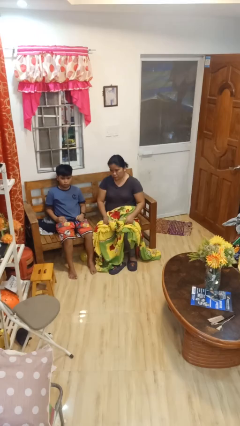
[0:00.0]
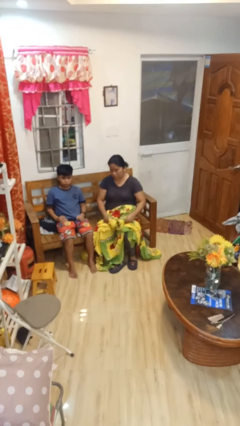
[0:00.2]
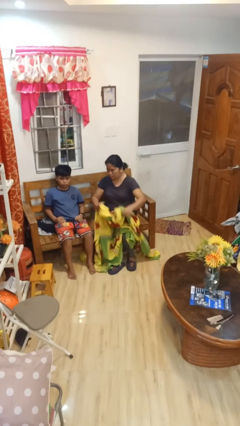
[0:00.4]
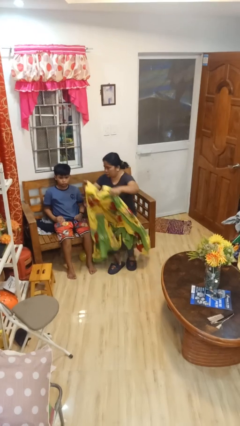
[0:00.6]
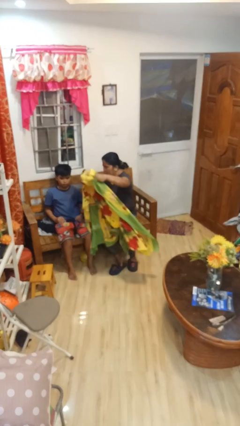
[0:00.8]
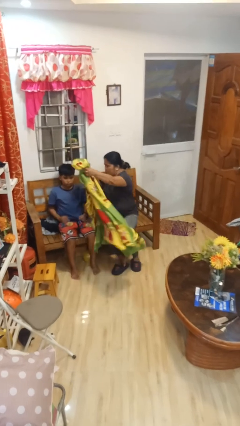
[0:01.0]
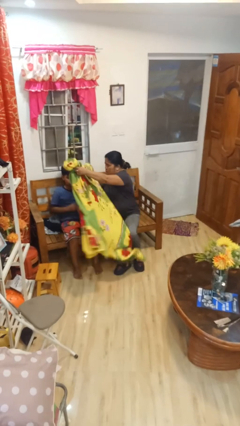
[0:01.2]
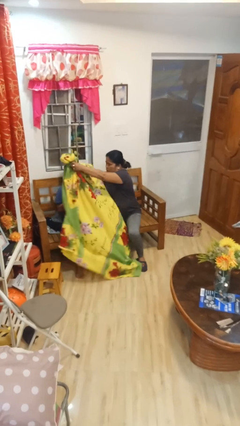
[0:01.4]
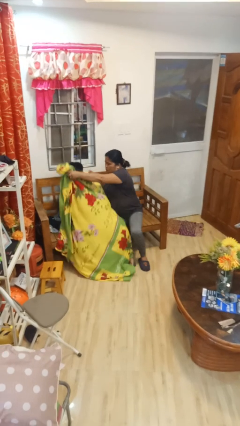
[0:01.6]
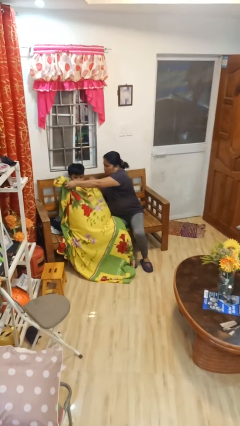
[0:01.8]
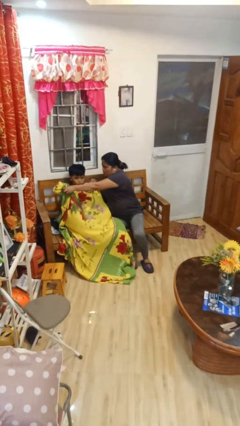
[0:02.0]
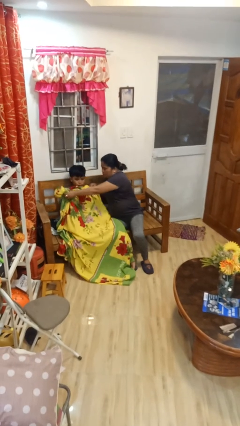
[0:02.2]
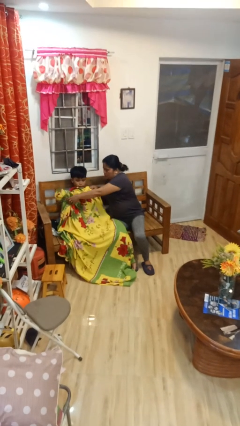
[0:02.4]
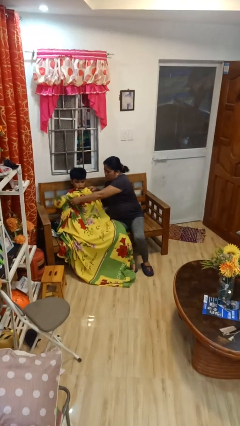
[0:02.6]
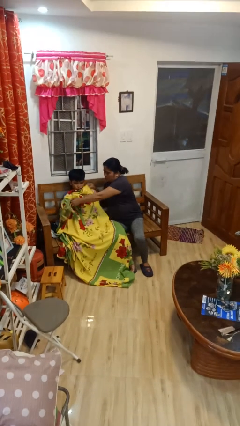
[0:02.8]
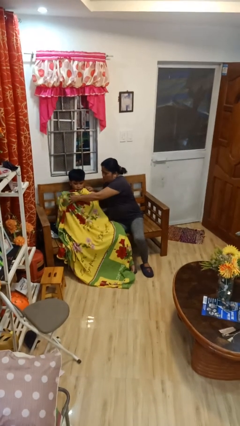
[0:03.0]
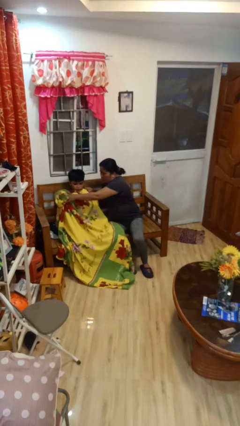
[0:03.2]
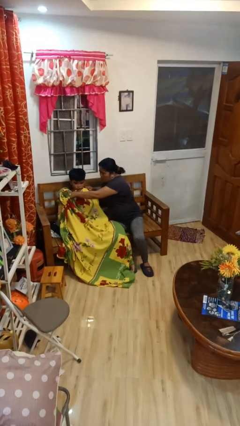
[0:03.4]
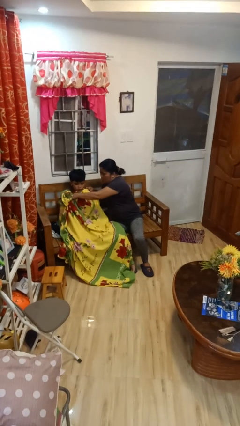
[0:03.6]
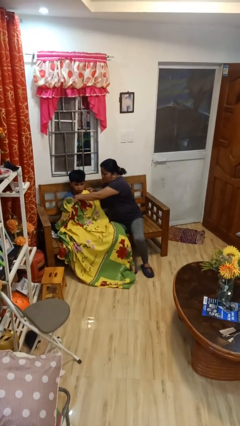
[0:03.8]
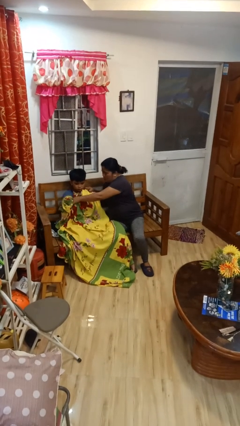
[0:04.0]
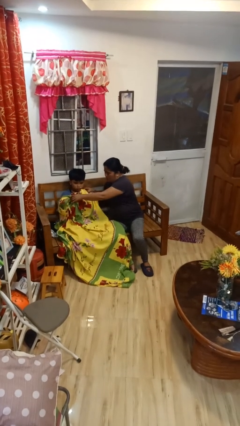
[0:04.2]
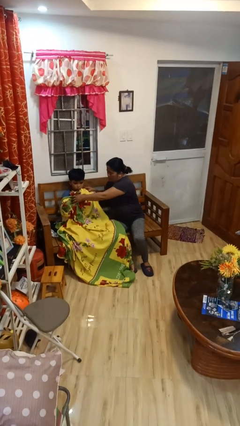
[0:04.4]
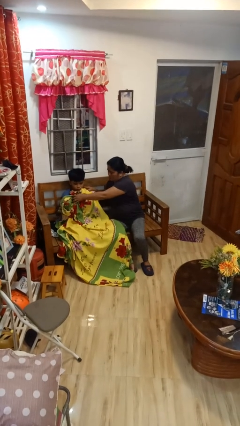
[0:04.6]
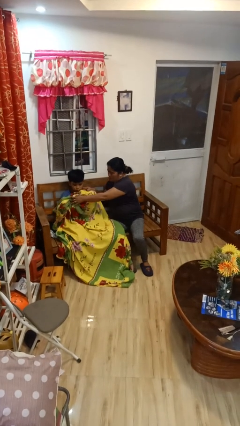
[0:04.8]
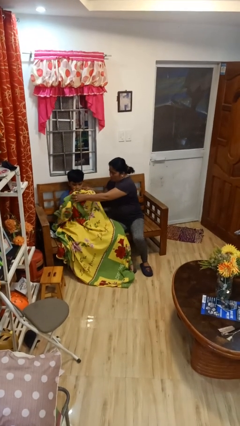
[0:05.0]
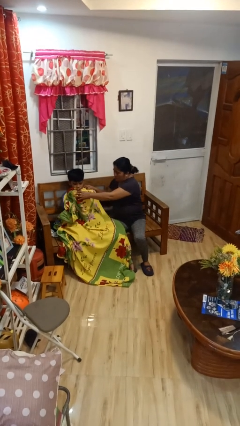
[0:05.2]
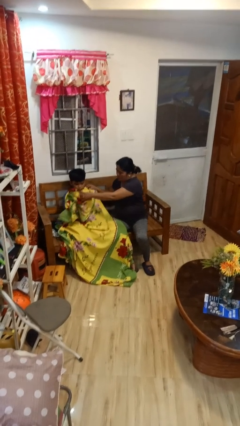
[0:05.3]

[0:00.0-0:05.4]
person covers friend with blanket

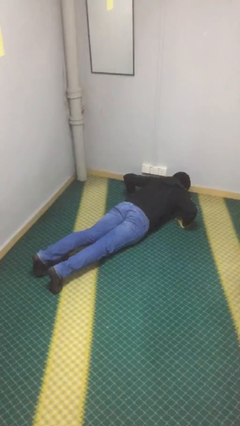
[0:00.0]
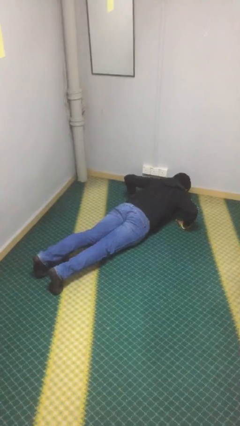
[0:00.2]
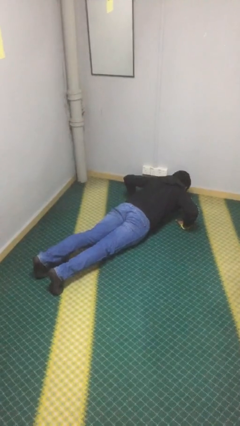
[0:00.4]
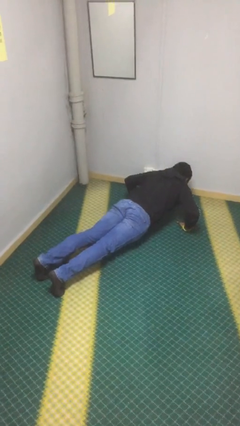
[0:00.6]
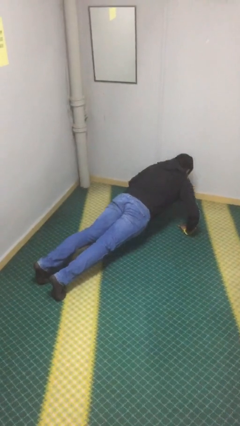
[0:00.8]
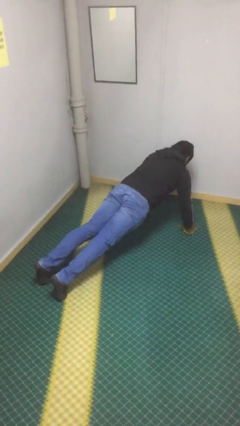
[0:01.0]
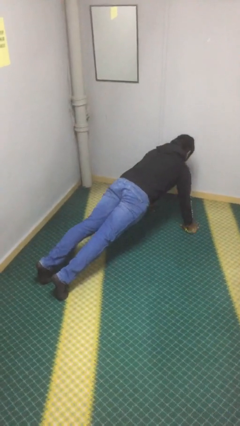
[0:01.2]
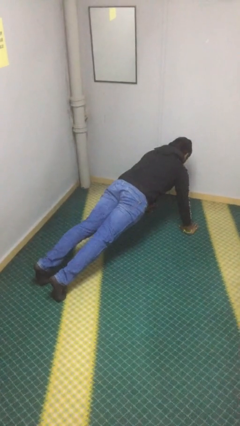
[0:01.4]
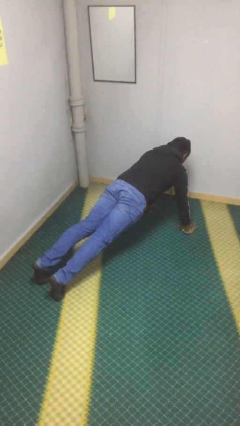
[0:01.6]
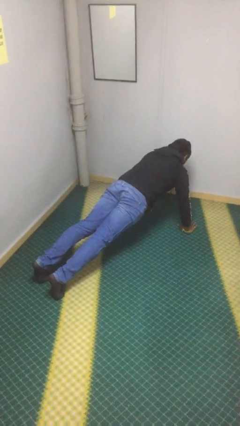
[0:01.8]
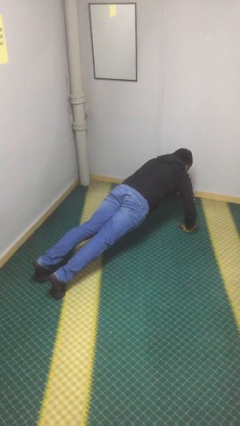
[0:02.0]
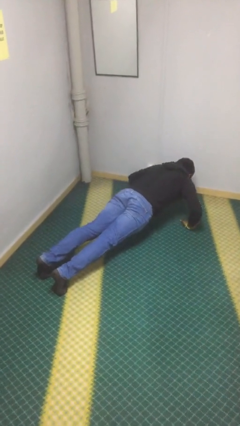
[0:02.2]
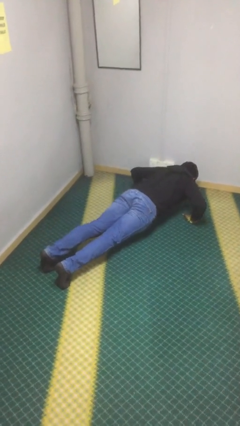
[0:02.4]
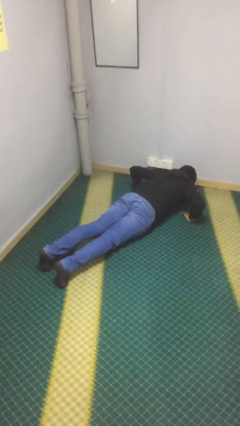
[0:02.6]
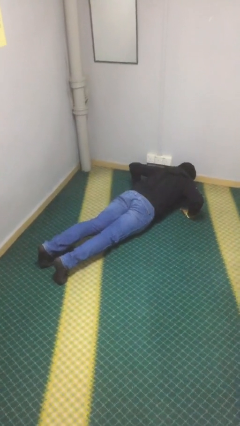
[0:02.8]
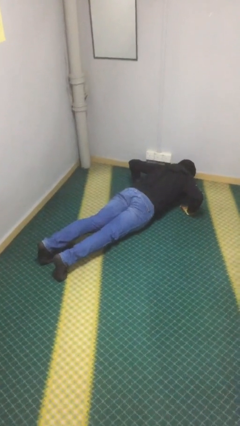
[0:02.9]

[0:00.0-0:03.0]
person exercises with pushup

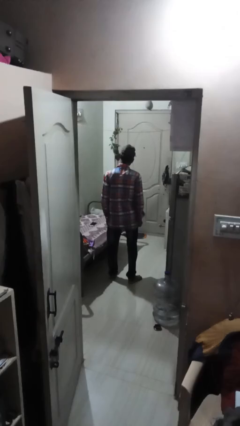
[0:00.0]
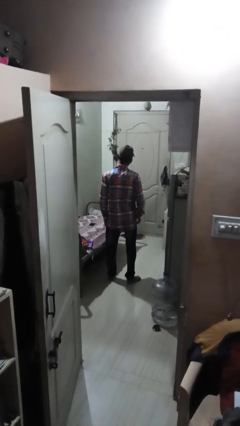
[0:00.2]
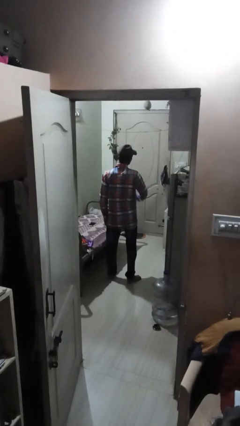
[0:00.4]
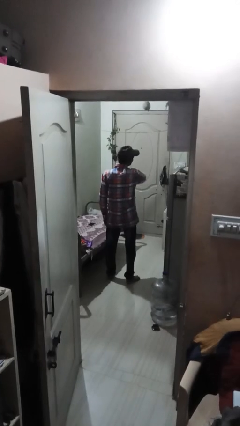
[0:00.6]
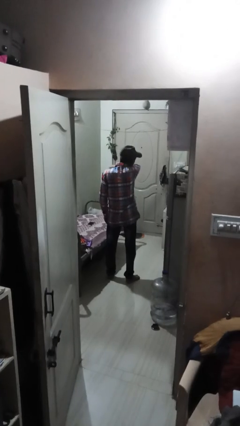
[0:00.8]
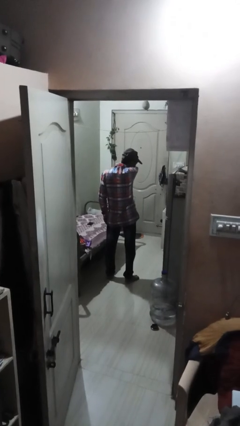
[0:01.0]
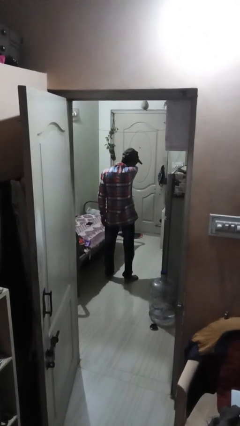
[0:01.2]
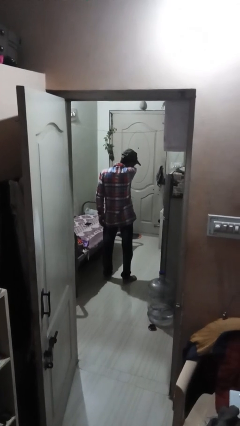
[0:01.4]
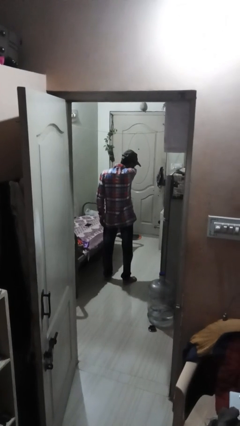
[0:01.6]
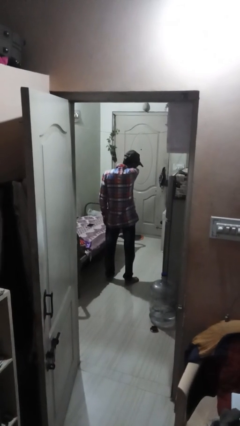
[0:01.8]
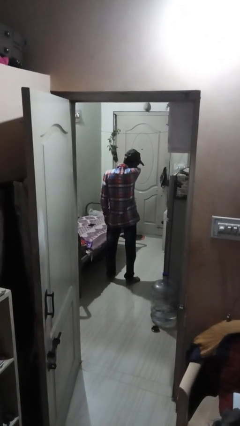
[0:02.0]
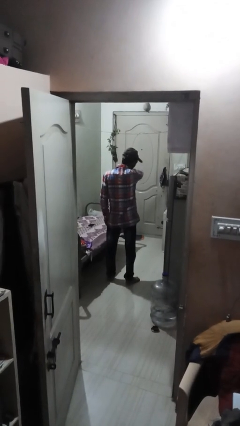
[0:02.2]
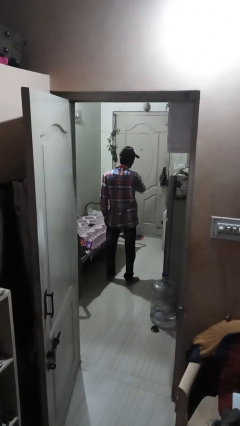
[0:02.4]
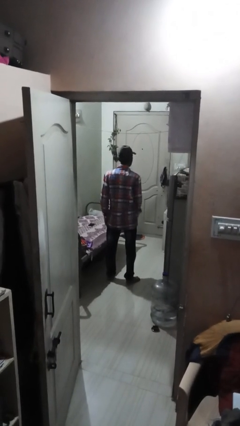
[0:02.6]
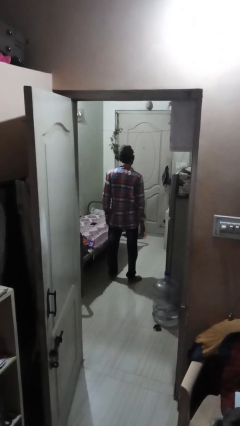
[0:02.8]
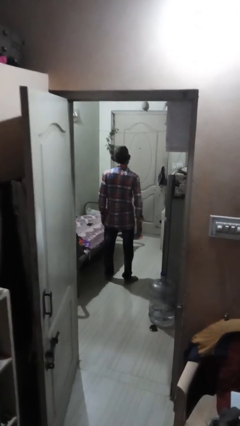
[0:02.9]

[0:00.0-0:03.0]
person sneezes into arm

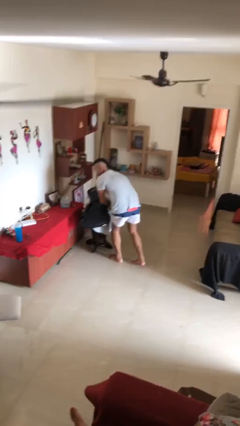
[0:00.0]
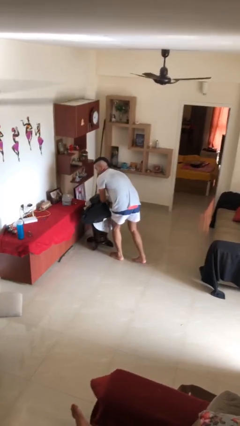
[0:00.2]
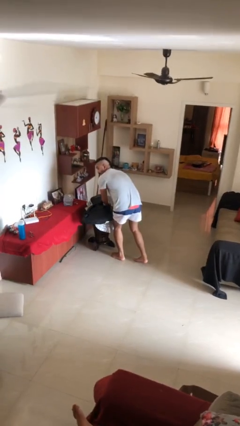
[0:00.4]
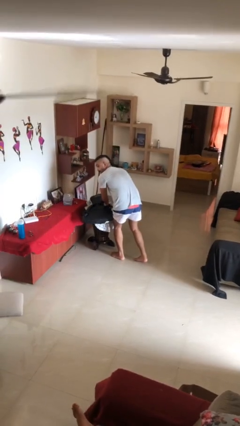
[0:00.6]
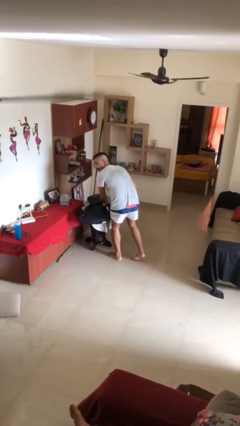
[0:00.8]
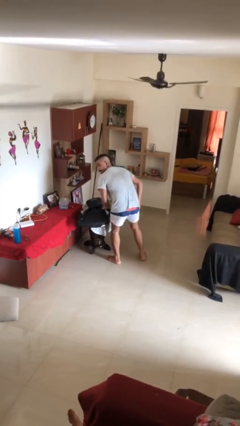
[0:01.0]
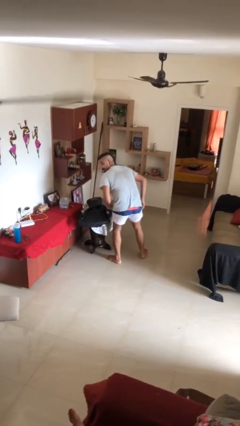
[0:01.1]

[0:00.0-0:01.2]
person puts down object on table

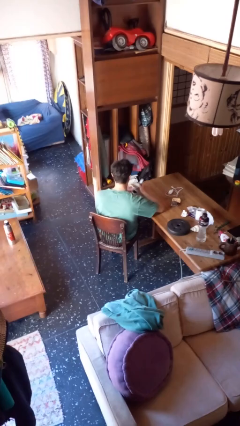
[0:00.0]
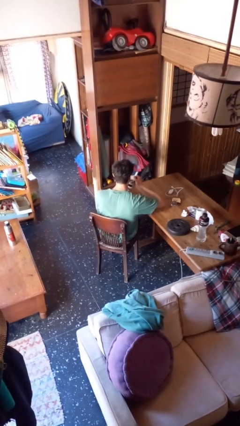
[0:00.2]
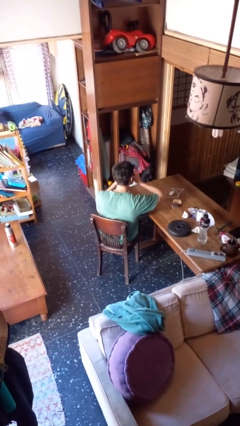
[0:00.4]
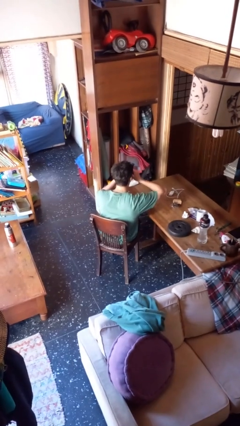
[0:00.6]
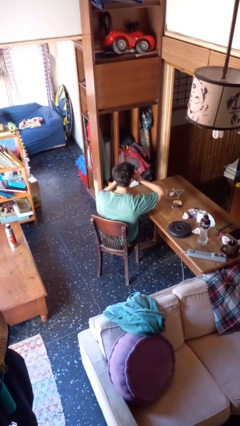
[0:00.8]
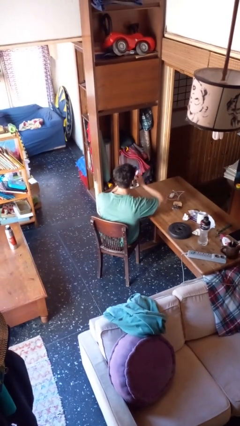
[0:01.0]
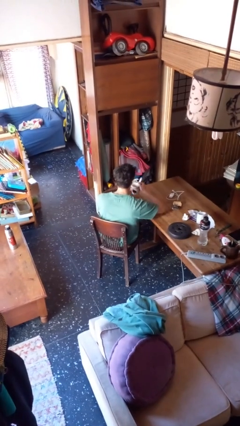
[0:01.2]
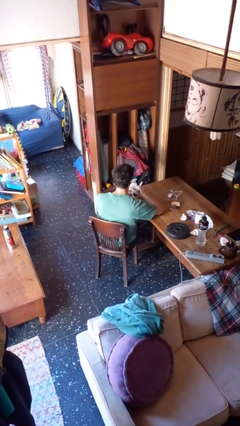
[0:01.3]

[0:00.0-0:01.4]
person drinks from mug

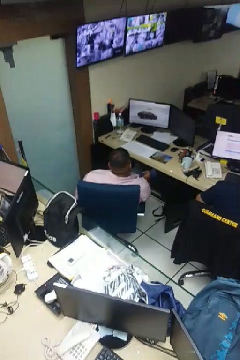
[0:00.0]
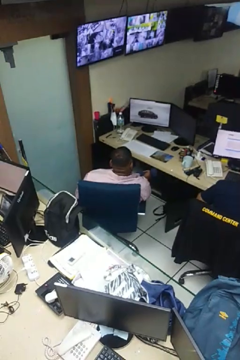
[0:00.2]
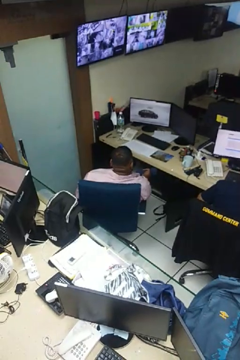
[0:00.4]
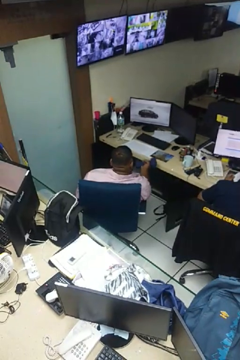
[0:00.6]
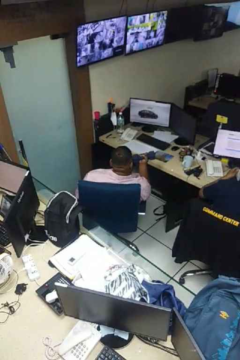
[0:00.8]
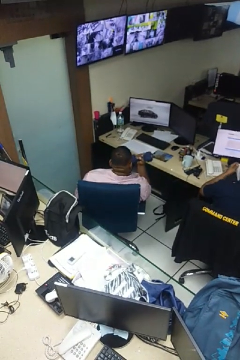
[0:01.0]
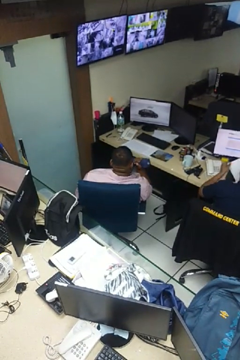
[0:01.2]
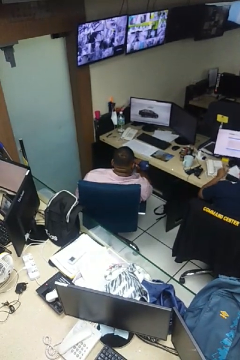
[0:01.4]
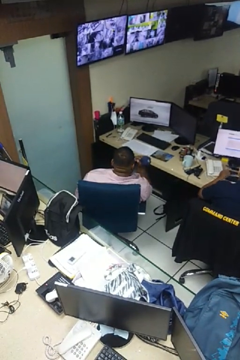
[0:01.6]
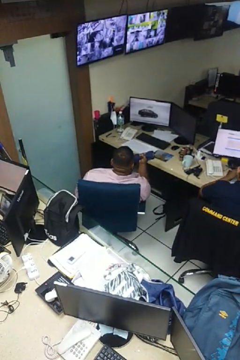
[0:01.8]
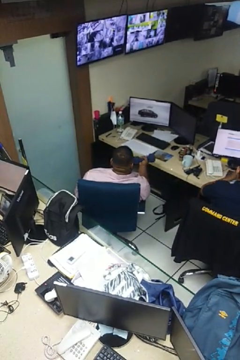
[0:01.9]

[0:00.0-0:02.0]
person lifts dumbbells

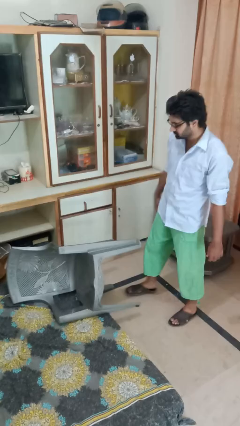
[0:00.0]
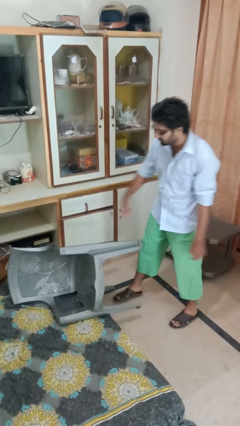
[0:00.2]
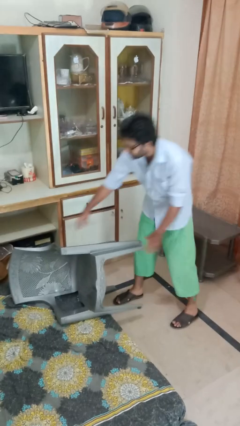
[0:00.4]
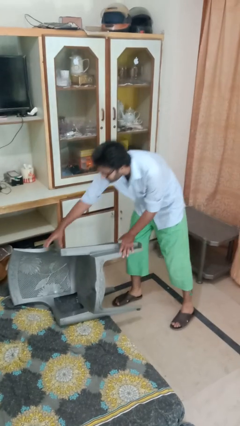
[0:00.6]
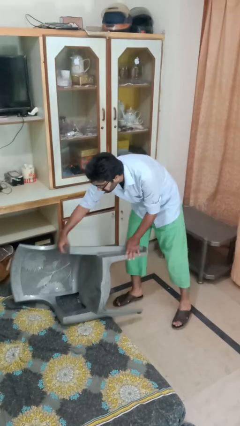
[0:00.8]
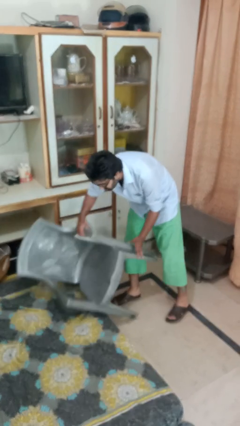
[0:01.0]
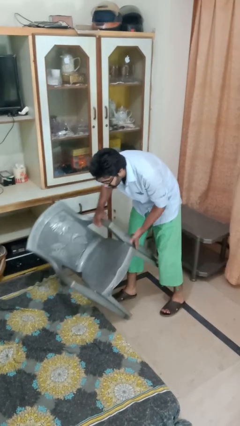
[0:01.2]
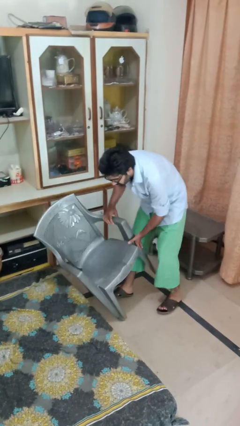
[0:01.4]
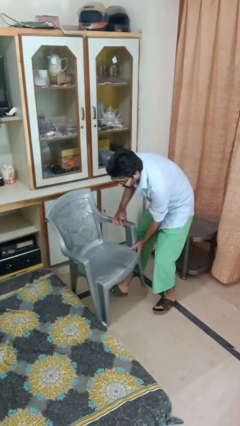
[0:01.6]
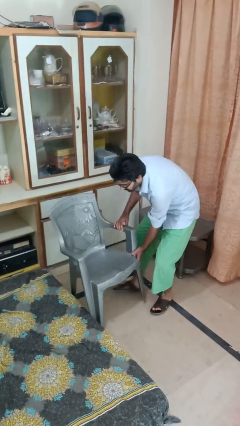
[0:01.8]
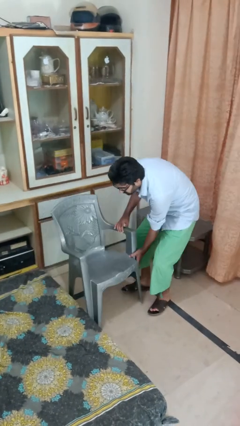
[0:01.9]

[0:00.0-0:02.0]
person sets upright furniture
